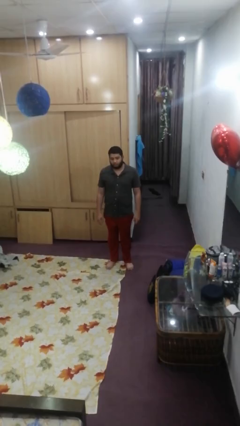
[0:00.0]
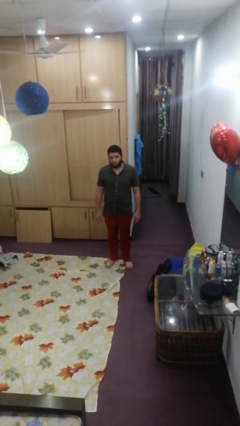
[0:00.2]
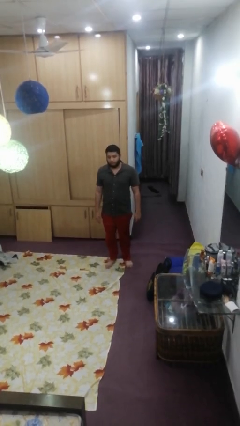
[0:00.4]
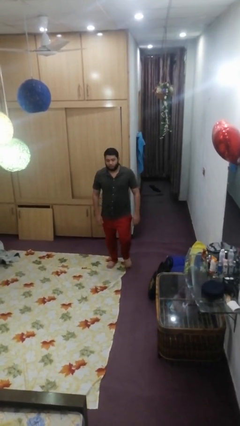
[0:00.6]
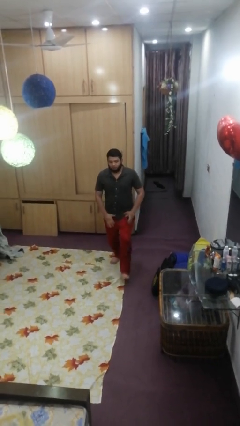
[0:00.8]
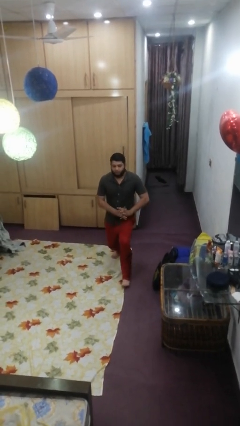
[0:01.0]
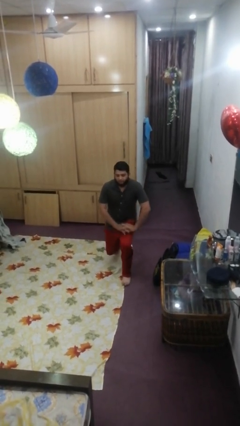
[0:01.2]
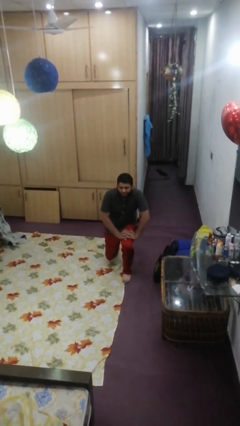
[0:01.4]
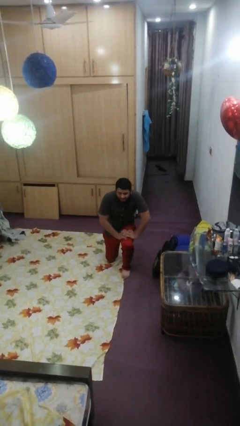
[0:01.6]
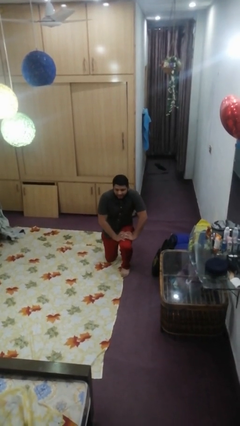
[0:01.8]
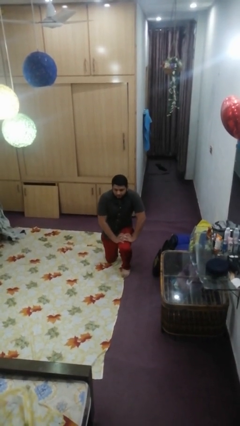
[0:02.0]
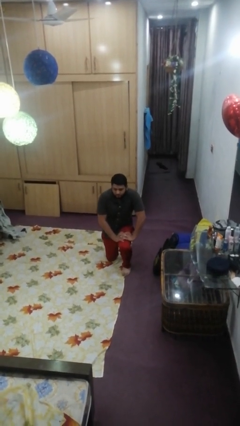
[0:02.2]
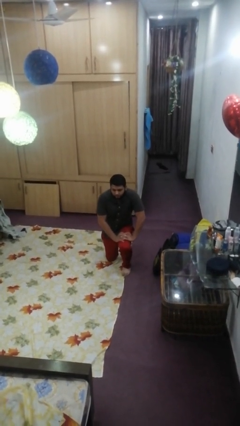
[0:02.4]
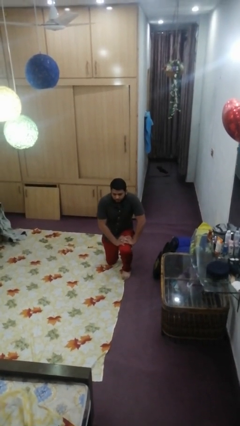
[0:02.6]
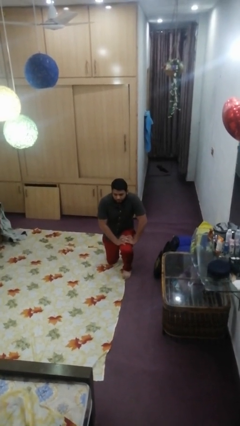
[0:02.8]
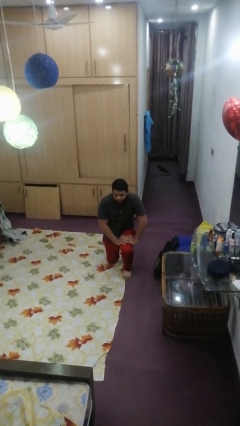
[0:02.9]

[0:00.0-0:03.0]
person kneels

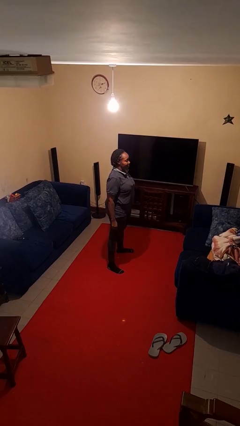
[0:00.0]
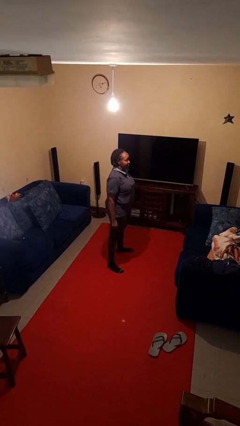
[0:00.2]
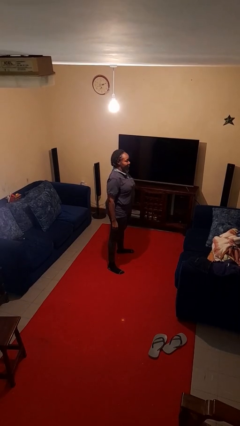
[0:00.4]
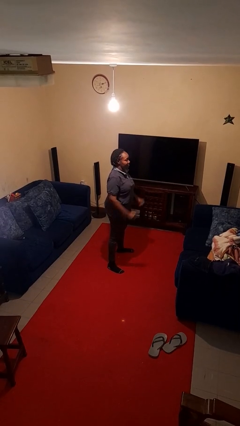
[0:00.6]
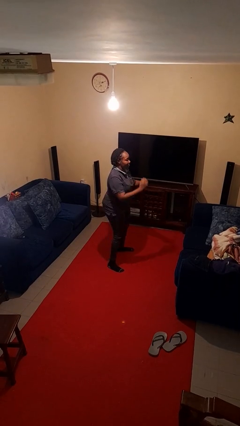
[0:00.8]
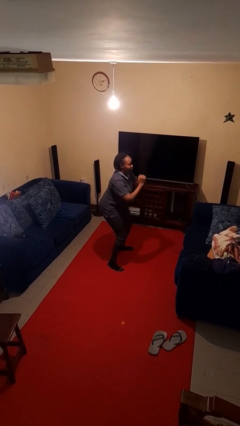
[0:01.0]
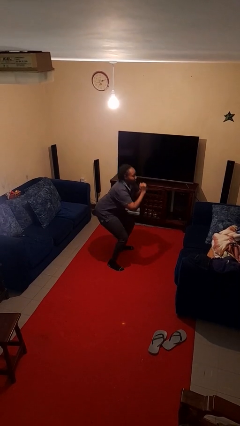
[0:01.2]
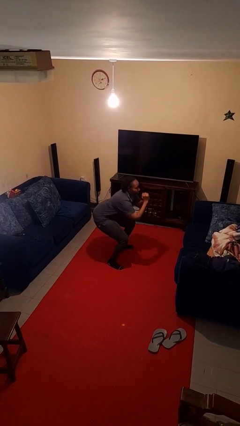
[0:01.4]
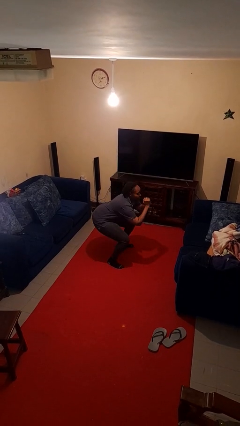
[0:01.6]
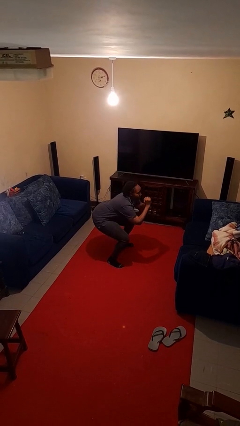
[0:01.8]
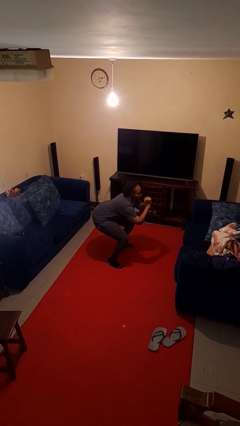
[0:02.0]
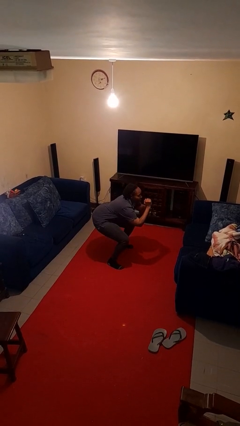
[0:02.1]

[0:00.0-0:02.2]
person squats

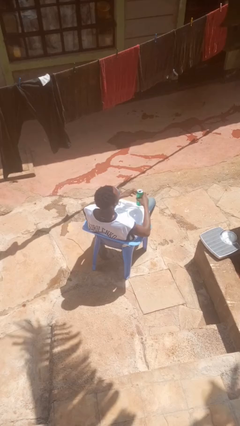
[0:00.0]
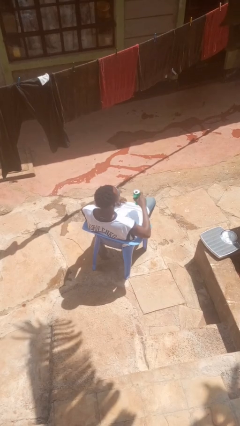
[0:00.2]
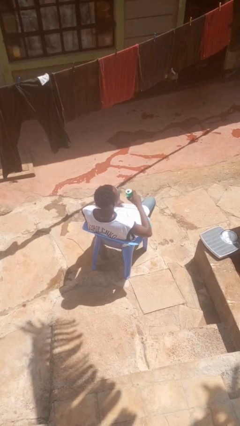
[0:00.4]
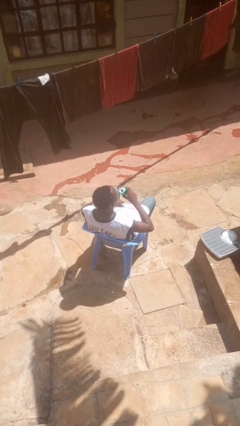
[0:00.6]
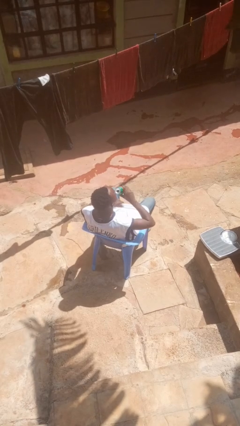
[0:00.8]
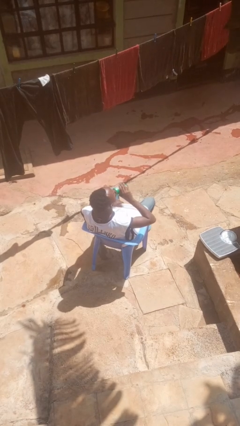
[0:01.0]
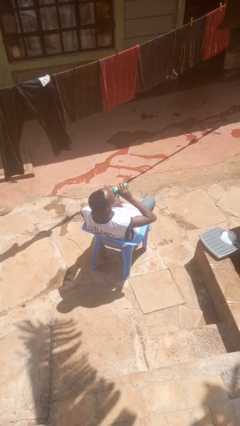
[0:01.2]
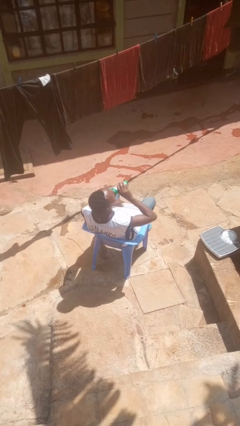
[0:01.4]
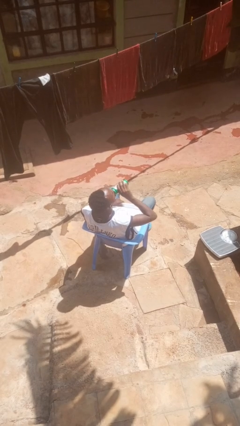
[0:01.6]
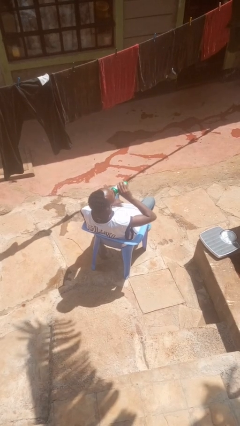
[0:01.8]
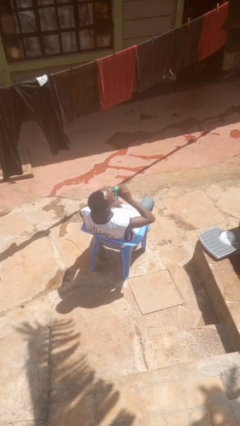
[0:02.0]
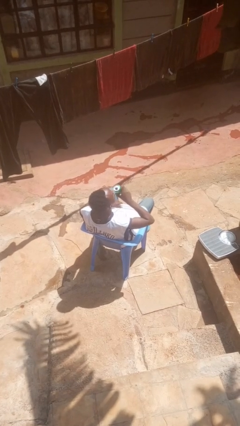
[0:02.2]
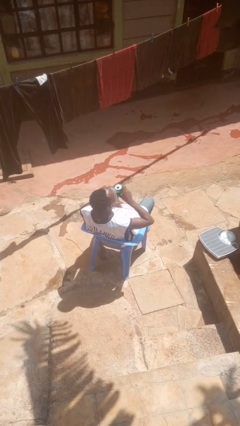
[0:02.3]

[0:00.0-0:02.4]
person drinks from beverage can

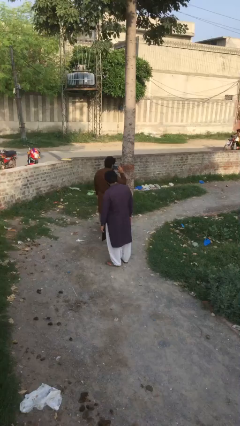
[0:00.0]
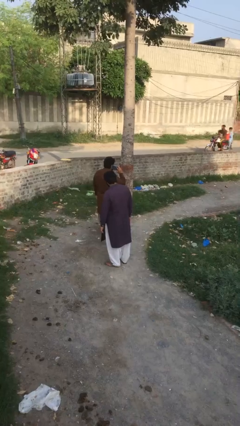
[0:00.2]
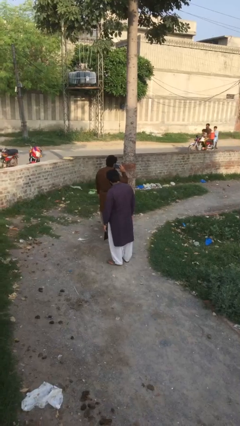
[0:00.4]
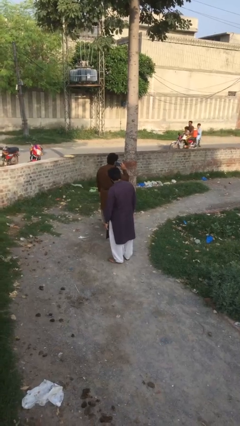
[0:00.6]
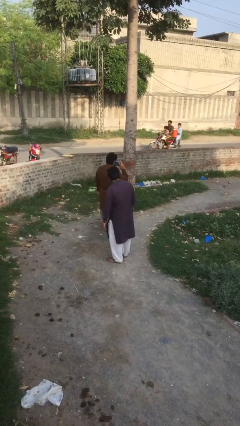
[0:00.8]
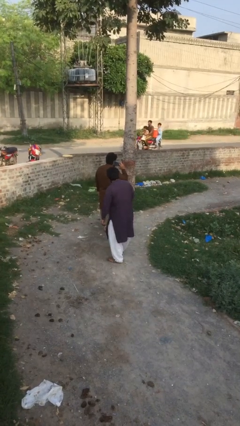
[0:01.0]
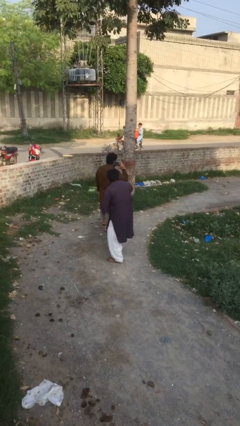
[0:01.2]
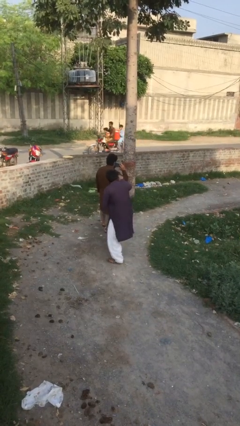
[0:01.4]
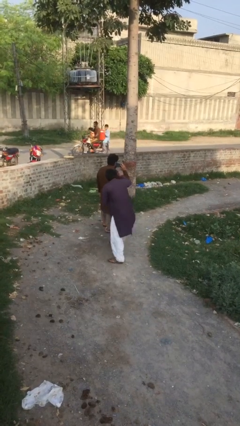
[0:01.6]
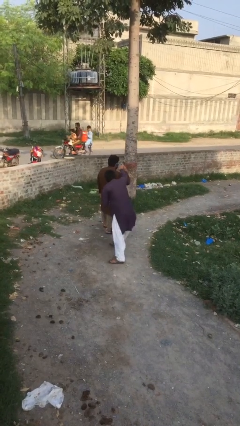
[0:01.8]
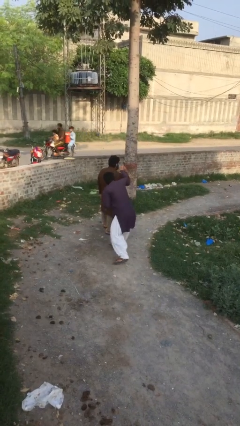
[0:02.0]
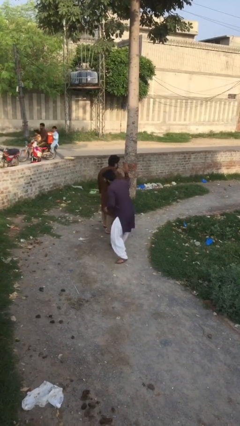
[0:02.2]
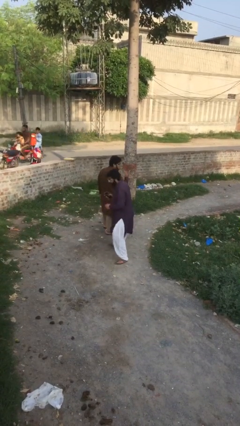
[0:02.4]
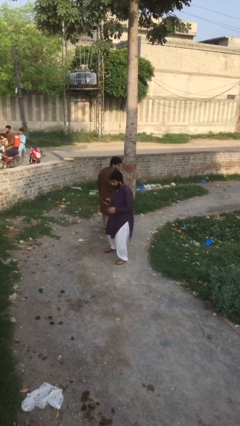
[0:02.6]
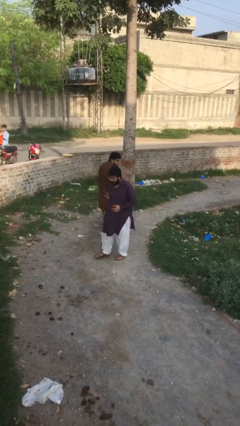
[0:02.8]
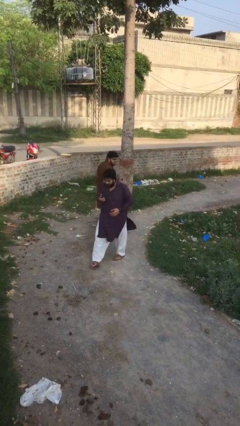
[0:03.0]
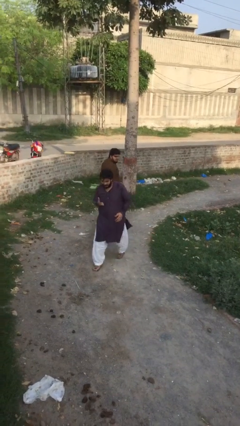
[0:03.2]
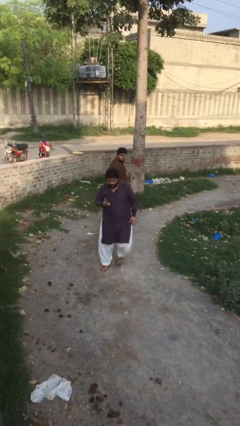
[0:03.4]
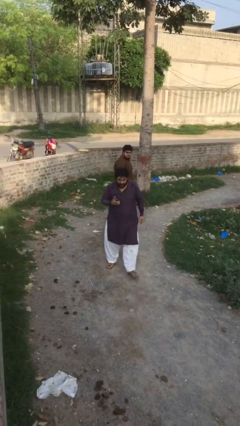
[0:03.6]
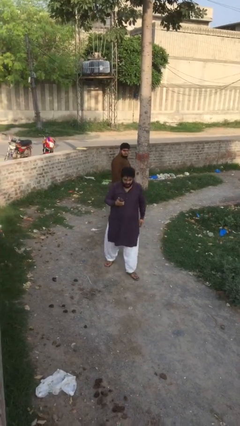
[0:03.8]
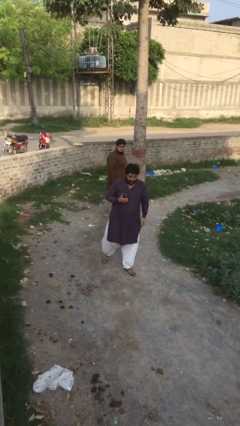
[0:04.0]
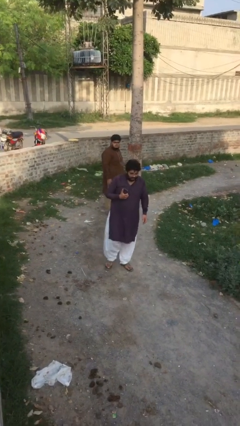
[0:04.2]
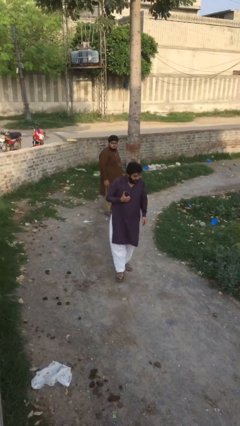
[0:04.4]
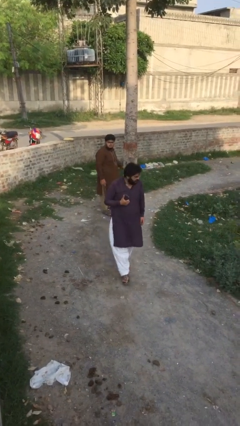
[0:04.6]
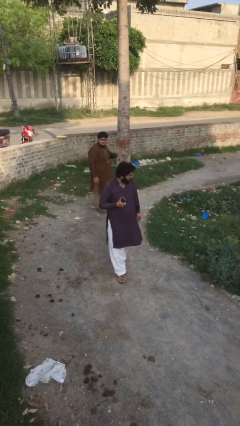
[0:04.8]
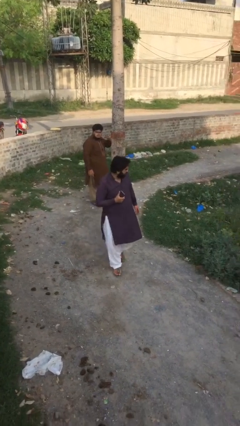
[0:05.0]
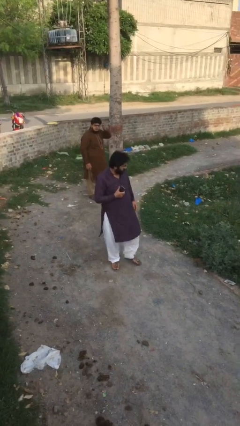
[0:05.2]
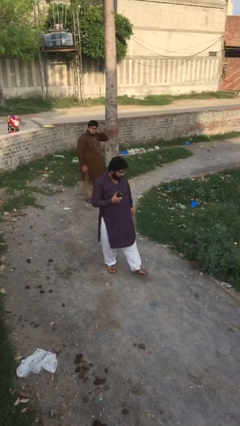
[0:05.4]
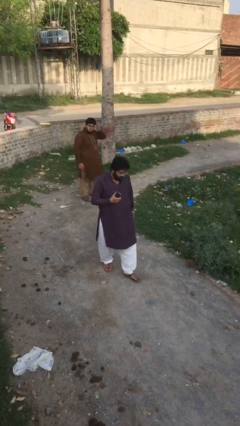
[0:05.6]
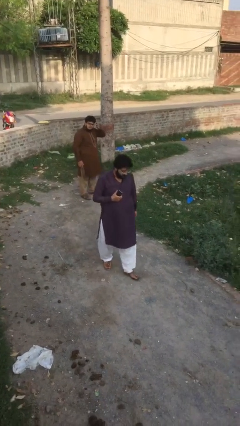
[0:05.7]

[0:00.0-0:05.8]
person steals object from person

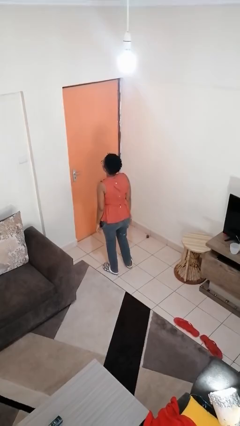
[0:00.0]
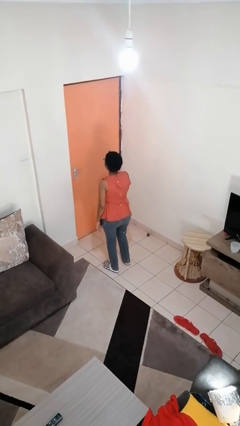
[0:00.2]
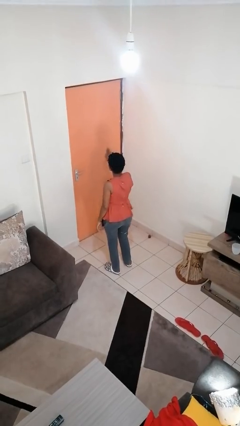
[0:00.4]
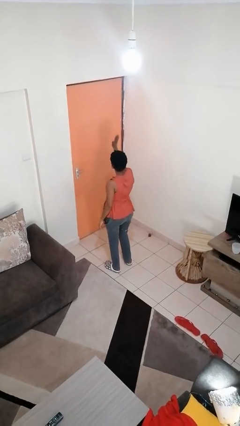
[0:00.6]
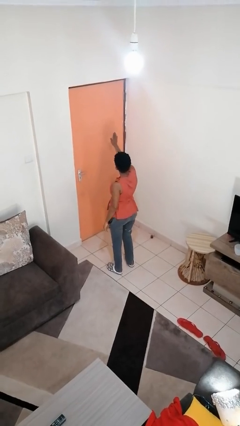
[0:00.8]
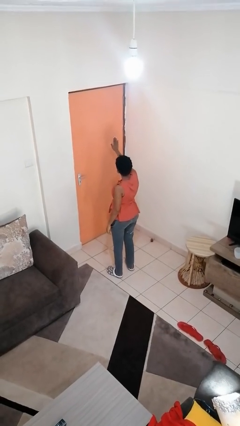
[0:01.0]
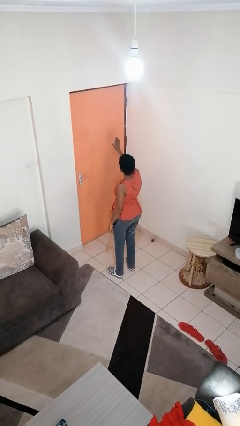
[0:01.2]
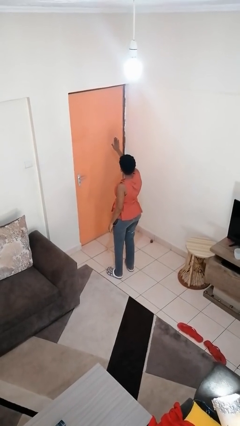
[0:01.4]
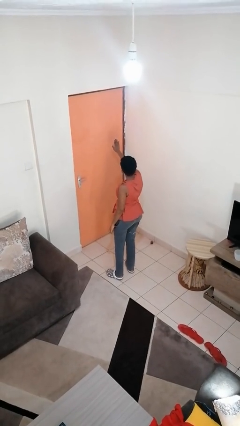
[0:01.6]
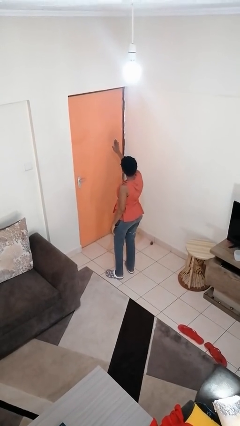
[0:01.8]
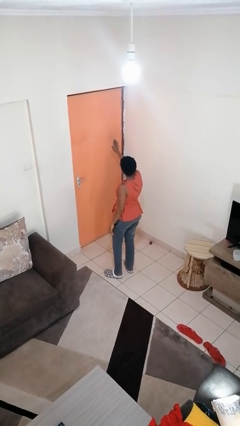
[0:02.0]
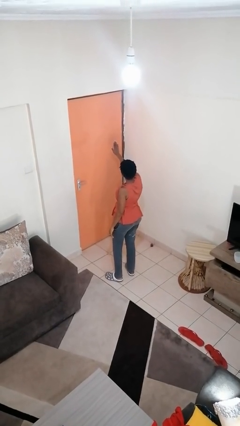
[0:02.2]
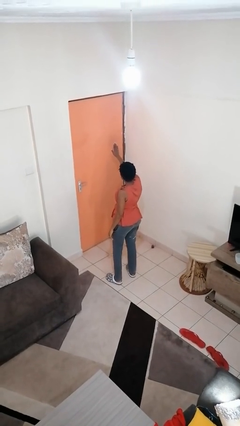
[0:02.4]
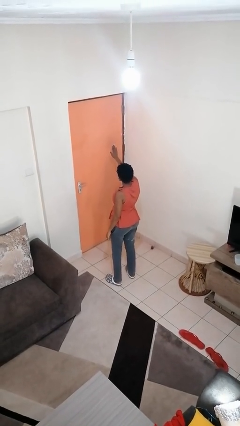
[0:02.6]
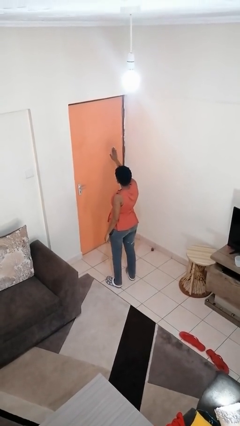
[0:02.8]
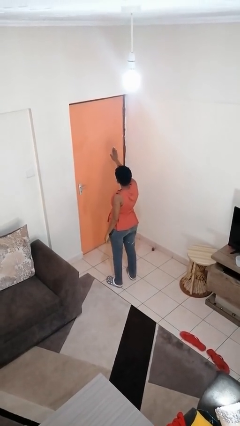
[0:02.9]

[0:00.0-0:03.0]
person gestures stop

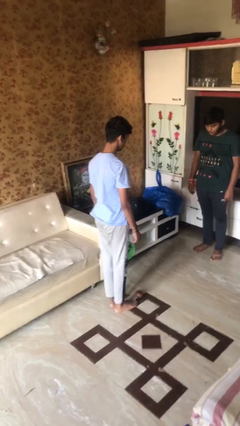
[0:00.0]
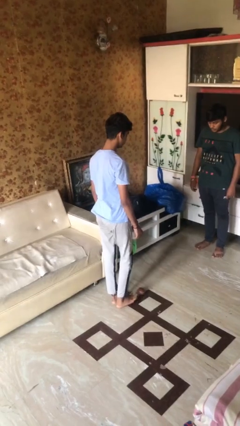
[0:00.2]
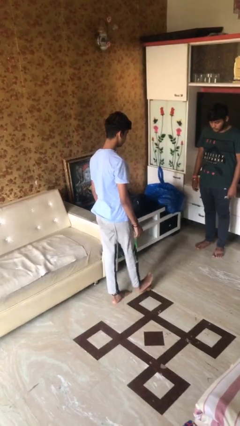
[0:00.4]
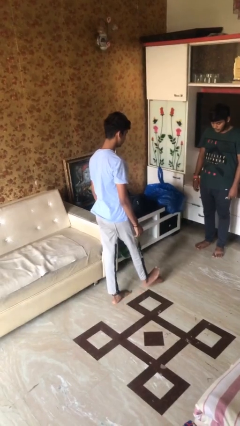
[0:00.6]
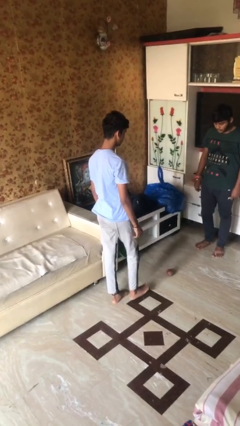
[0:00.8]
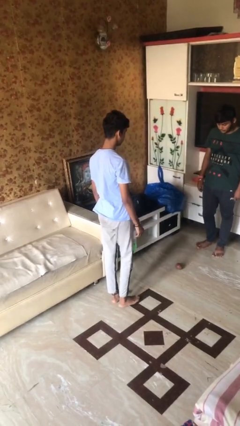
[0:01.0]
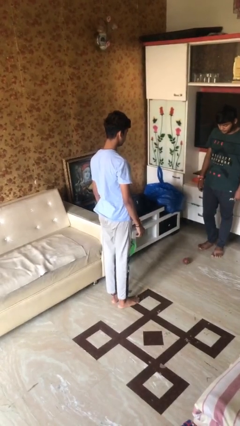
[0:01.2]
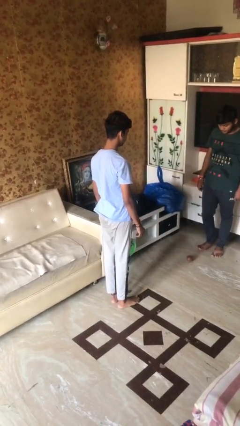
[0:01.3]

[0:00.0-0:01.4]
person kicks object to person
